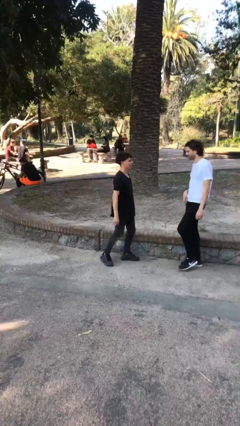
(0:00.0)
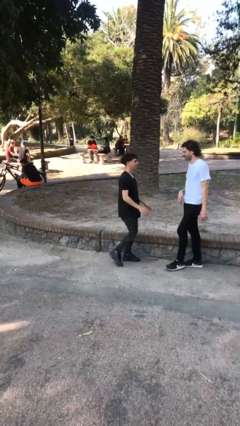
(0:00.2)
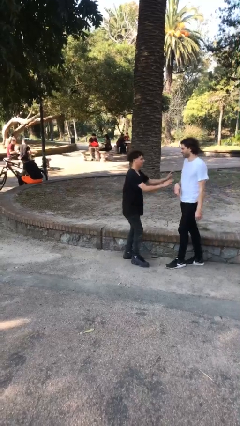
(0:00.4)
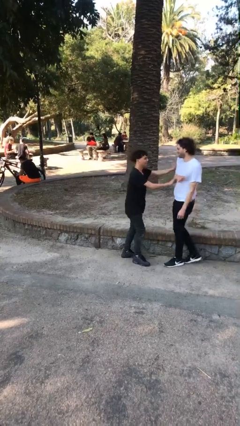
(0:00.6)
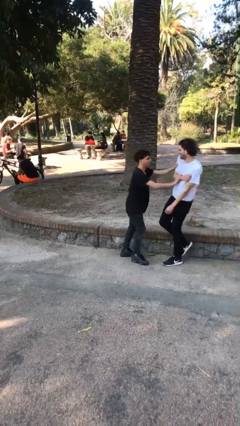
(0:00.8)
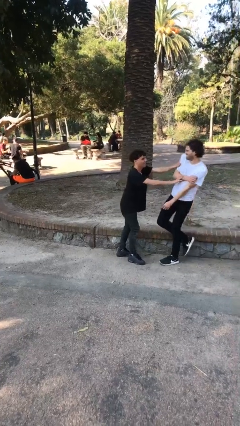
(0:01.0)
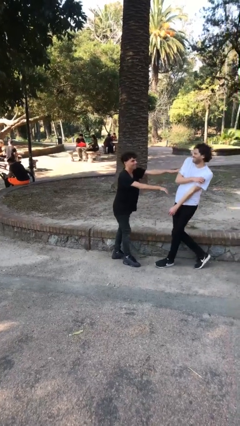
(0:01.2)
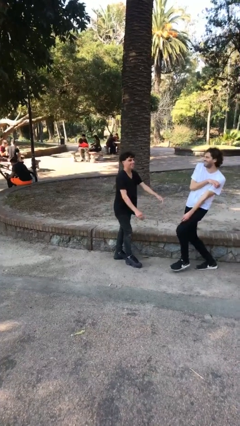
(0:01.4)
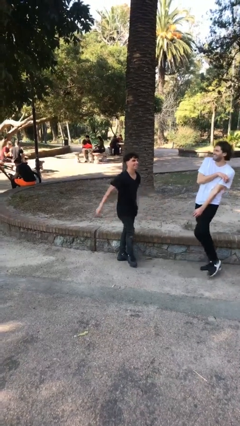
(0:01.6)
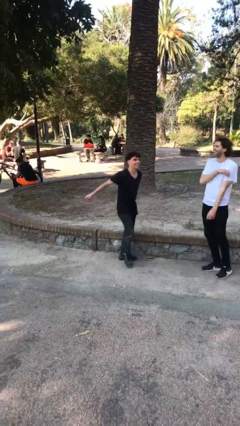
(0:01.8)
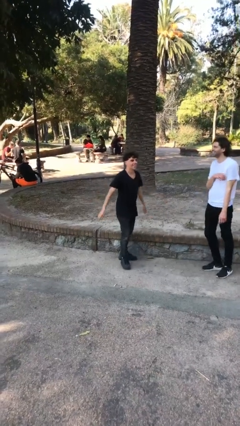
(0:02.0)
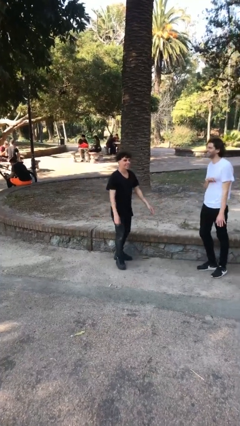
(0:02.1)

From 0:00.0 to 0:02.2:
person shoves person

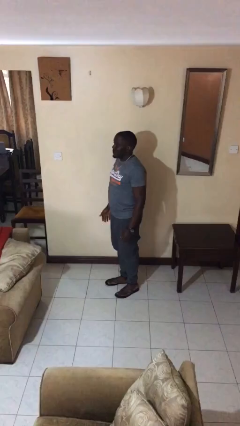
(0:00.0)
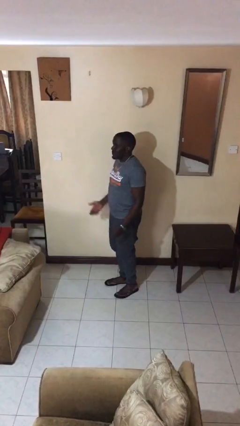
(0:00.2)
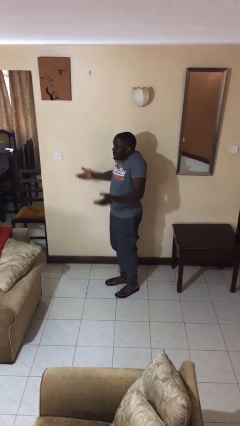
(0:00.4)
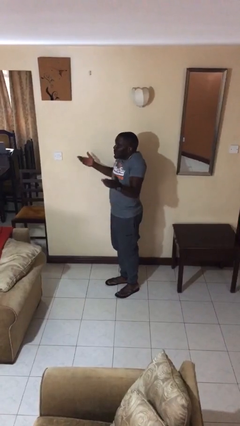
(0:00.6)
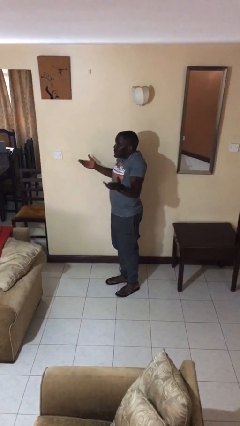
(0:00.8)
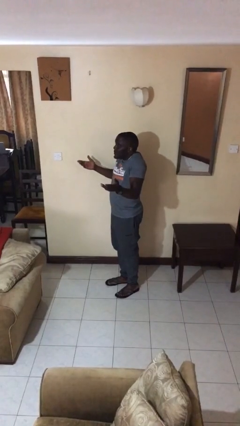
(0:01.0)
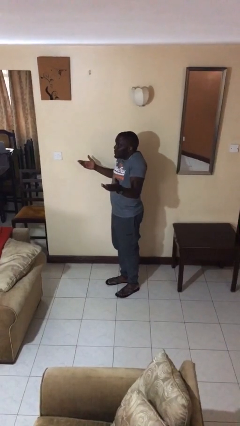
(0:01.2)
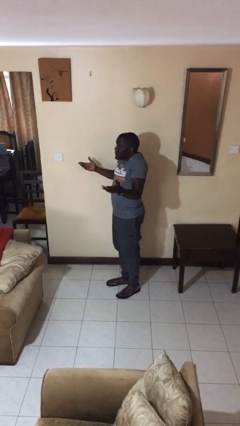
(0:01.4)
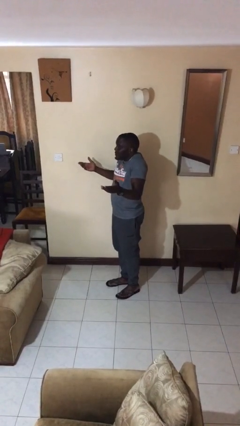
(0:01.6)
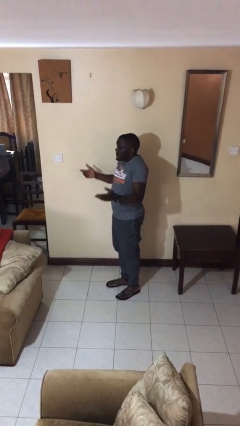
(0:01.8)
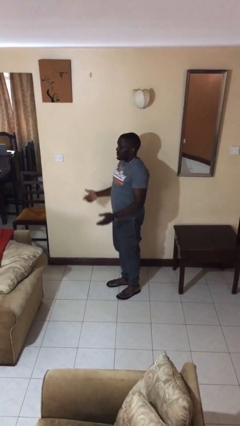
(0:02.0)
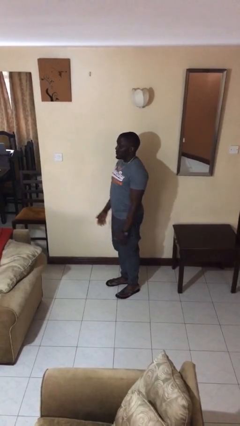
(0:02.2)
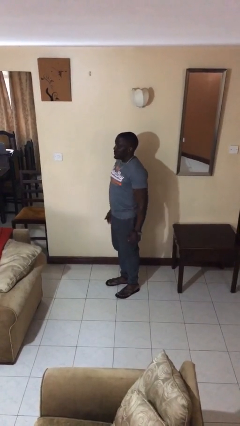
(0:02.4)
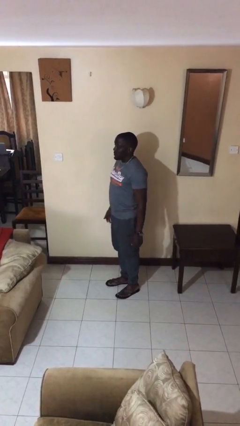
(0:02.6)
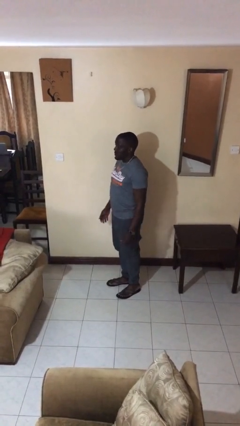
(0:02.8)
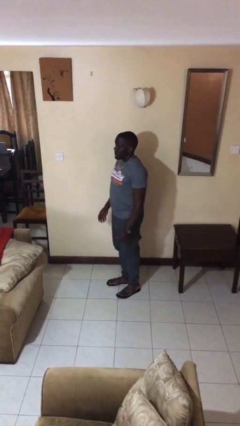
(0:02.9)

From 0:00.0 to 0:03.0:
person shrugs

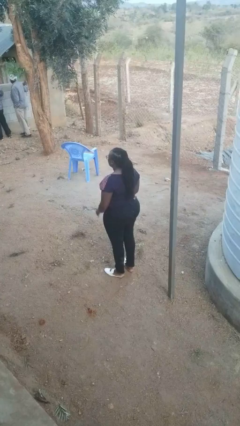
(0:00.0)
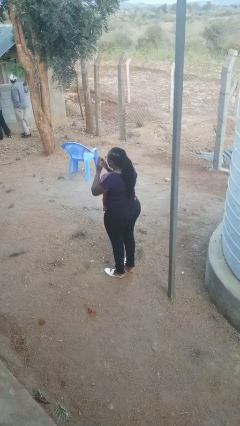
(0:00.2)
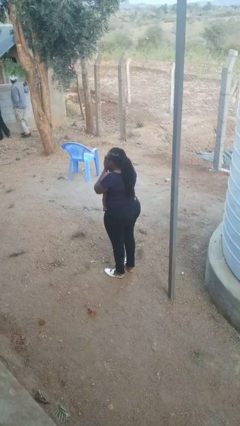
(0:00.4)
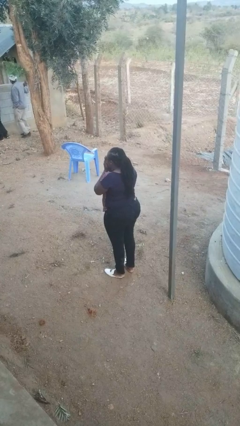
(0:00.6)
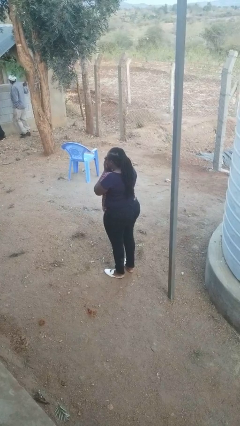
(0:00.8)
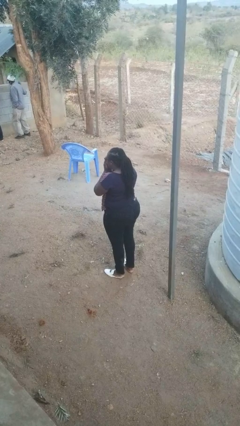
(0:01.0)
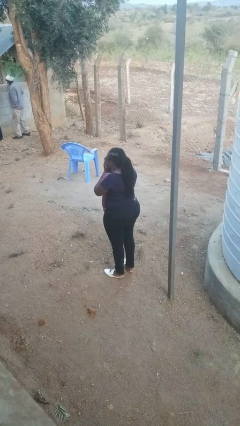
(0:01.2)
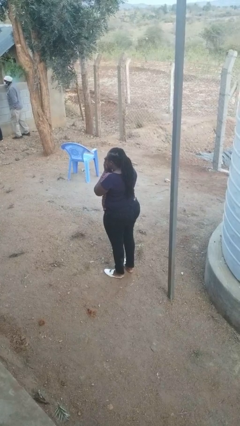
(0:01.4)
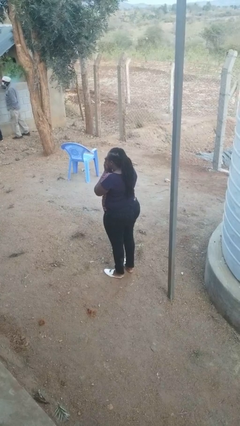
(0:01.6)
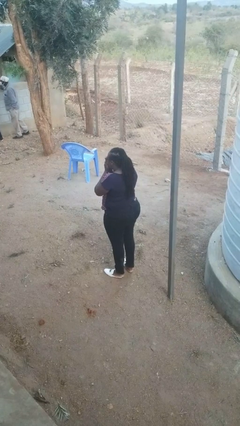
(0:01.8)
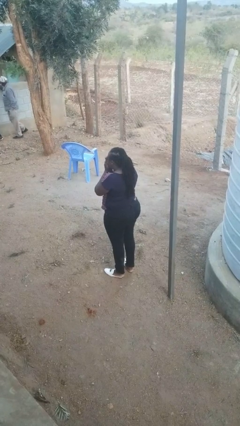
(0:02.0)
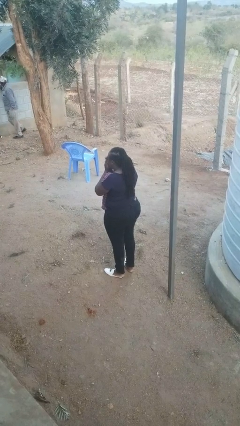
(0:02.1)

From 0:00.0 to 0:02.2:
person sneezes into hand

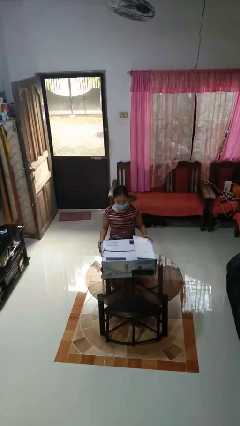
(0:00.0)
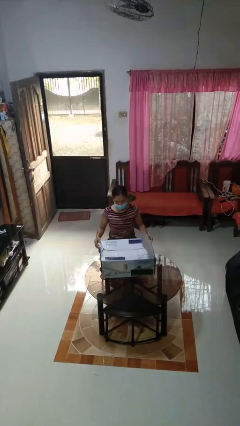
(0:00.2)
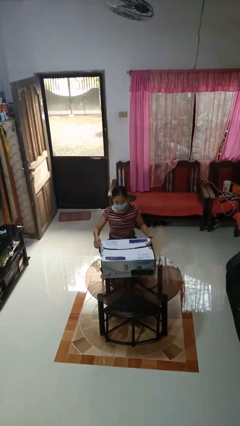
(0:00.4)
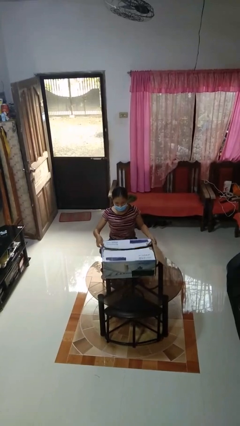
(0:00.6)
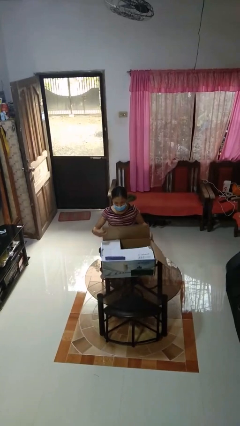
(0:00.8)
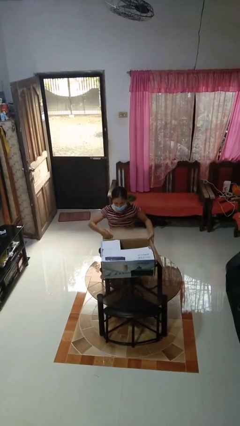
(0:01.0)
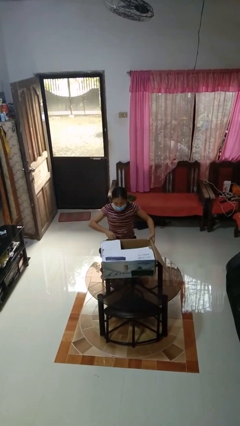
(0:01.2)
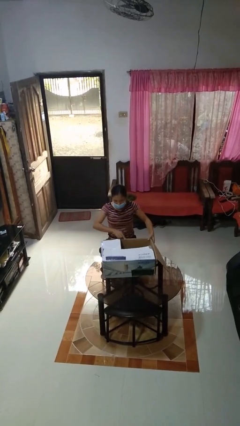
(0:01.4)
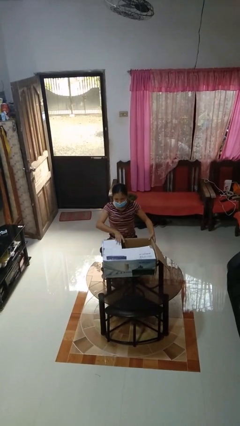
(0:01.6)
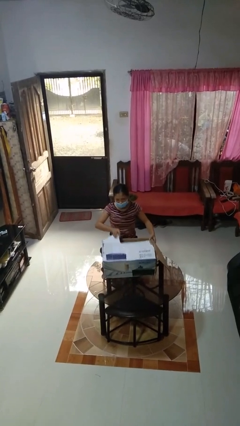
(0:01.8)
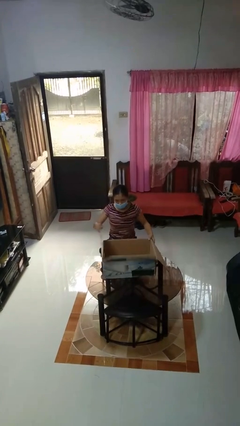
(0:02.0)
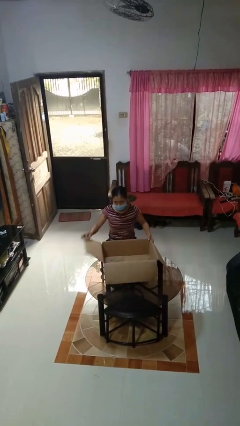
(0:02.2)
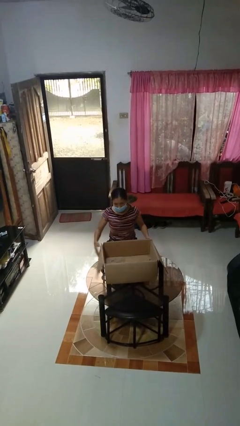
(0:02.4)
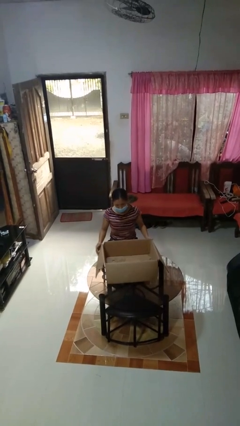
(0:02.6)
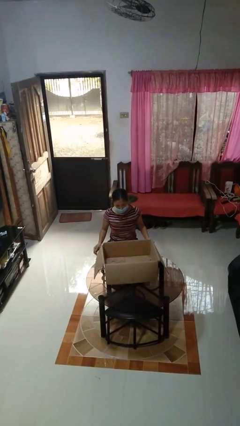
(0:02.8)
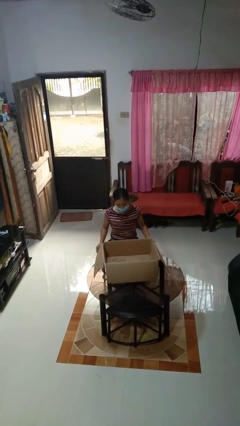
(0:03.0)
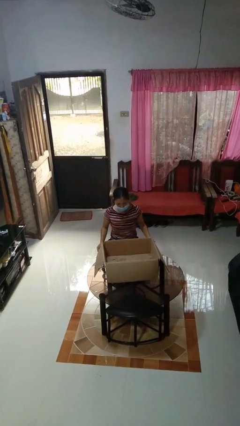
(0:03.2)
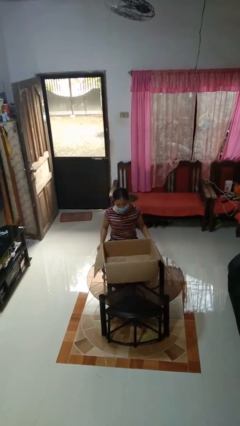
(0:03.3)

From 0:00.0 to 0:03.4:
person opens box

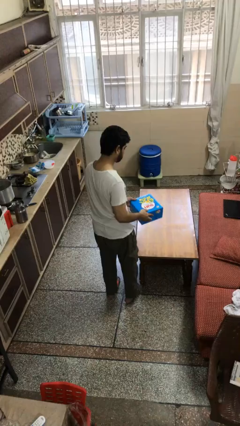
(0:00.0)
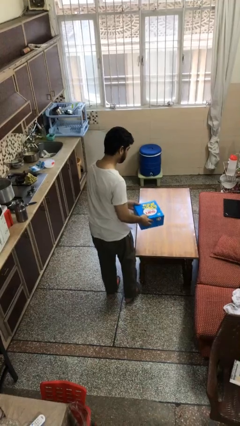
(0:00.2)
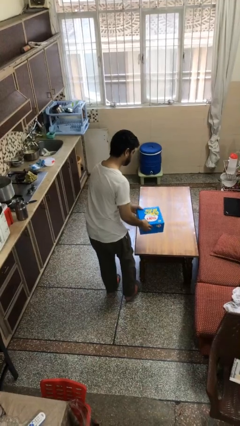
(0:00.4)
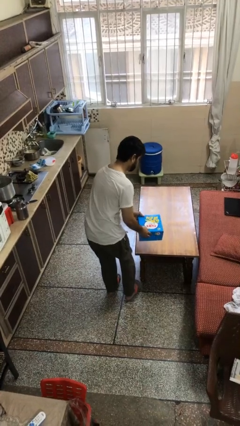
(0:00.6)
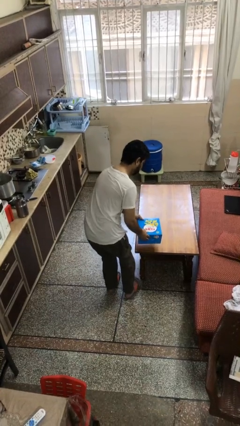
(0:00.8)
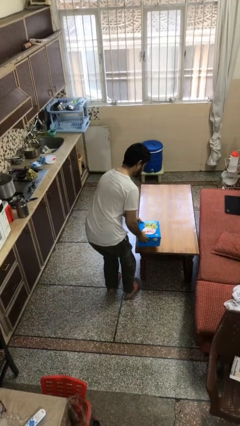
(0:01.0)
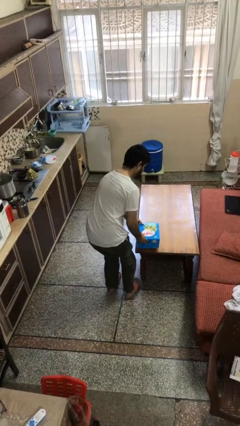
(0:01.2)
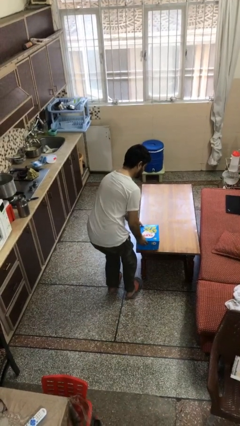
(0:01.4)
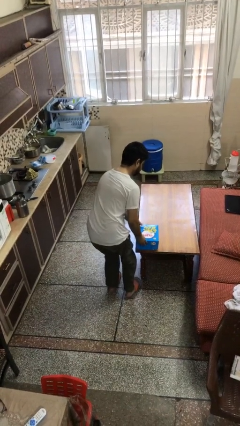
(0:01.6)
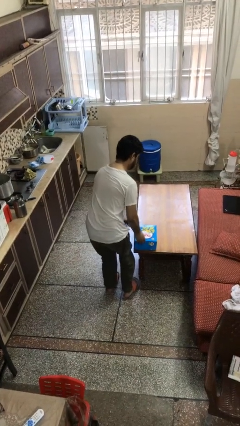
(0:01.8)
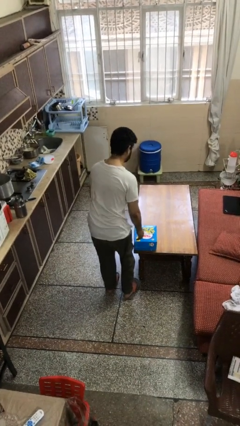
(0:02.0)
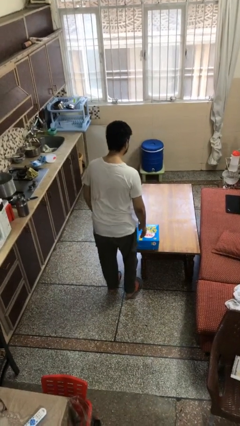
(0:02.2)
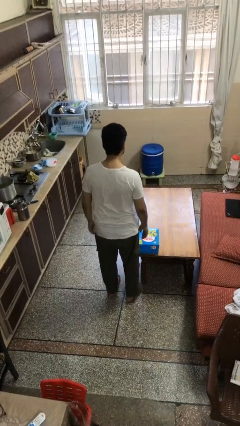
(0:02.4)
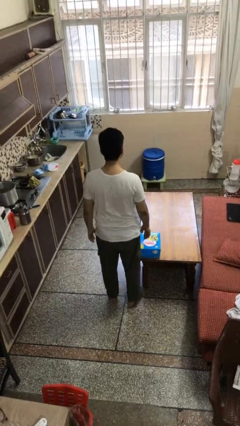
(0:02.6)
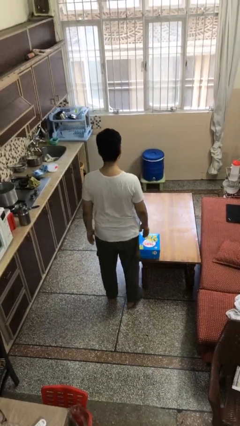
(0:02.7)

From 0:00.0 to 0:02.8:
person puts down object on table

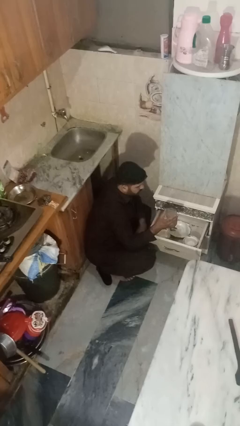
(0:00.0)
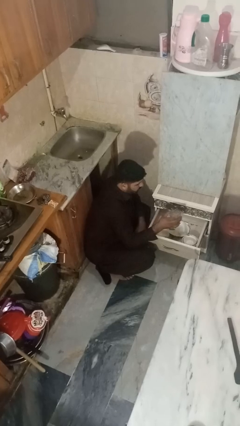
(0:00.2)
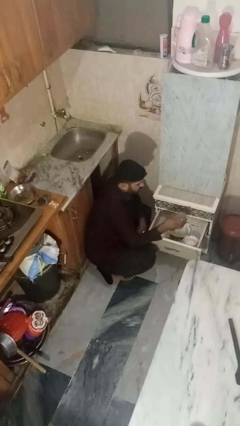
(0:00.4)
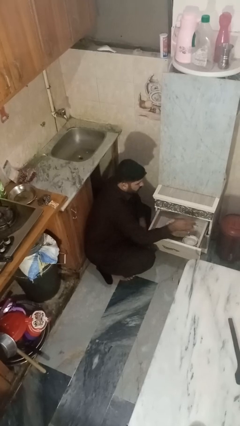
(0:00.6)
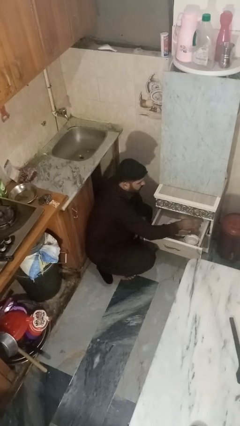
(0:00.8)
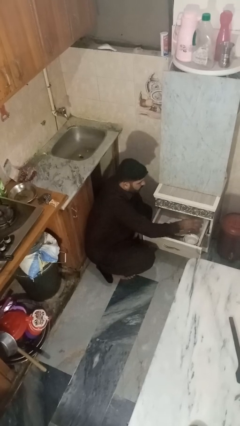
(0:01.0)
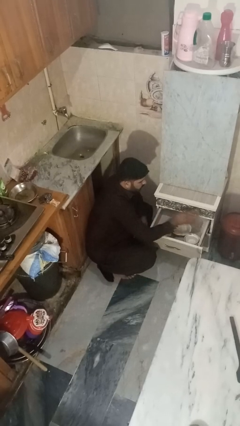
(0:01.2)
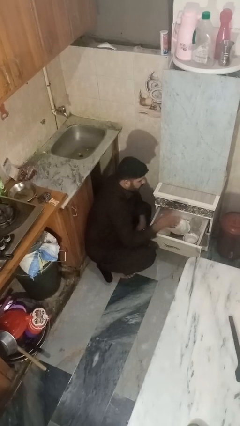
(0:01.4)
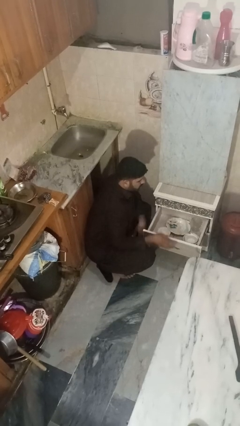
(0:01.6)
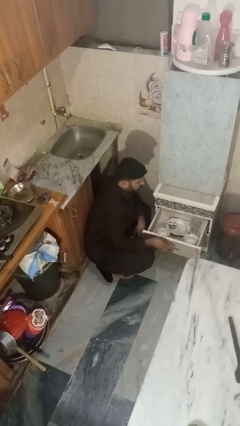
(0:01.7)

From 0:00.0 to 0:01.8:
person puts object into kitchen drawer

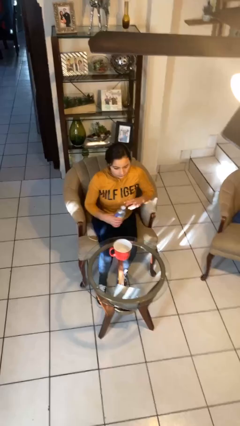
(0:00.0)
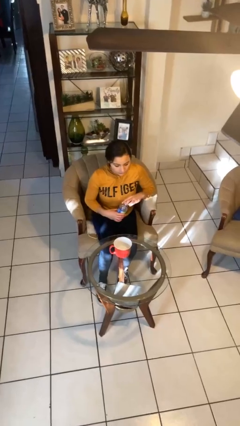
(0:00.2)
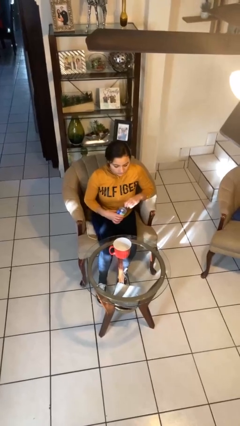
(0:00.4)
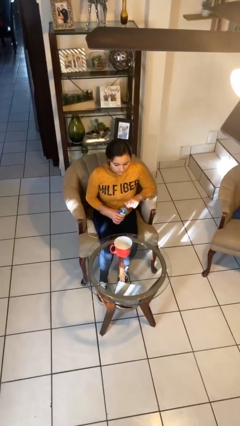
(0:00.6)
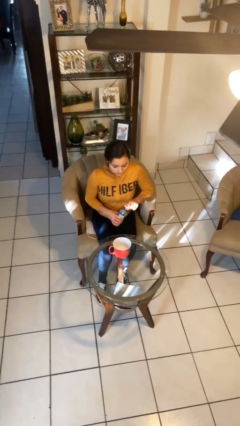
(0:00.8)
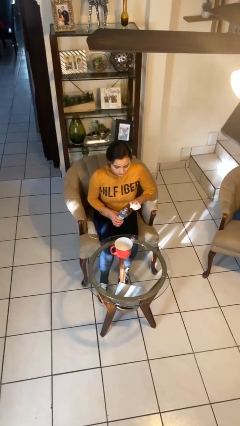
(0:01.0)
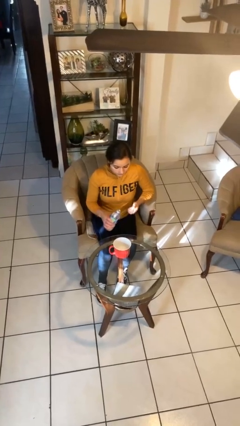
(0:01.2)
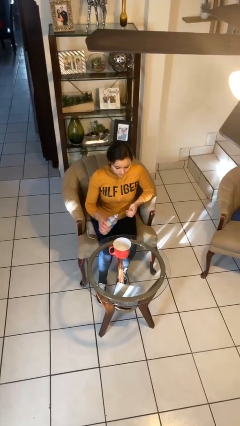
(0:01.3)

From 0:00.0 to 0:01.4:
person unscrews lid from bottle

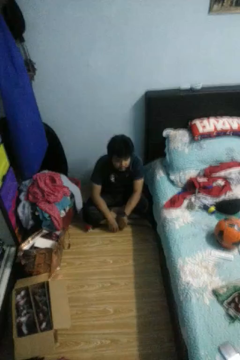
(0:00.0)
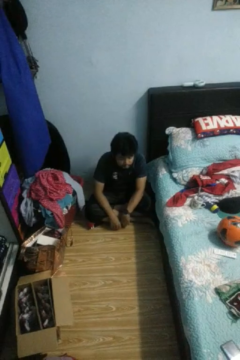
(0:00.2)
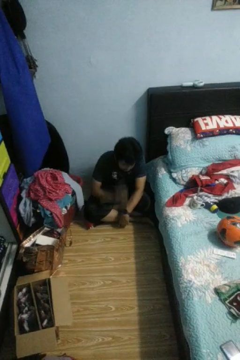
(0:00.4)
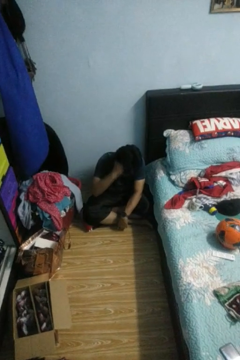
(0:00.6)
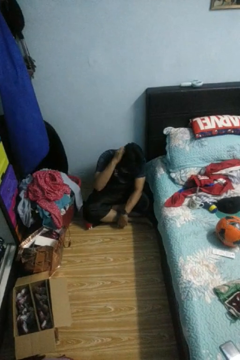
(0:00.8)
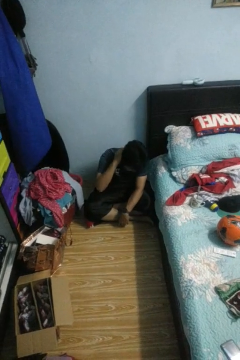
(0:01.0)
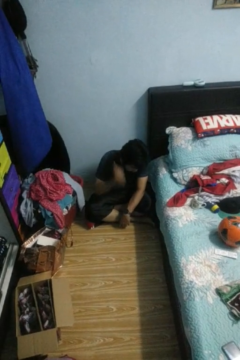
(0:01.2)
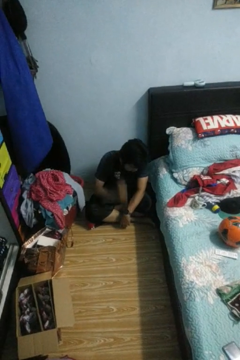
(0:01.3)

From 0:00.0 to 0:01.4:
person strokes hair
